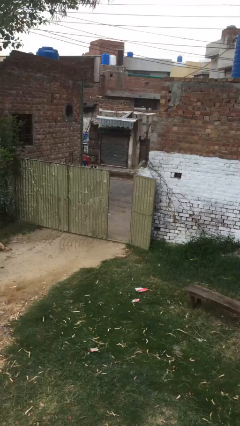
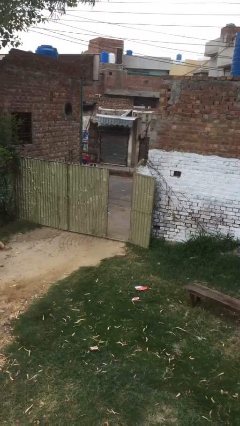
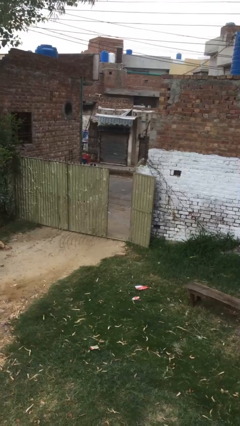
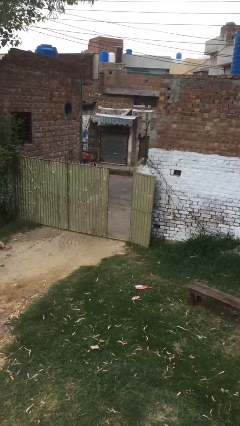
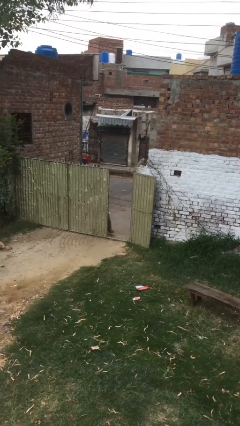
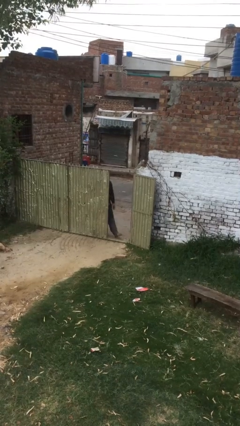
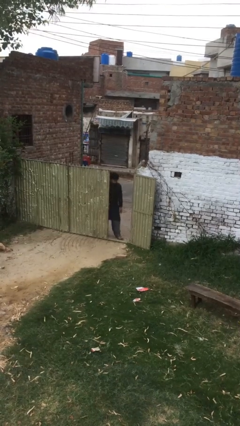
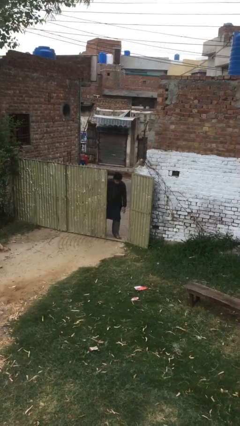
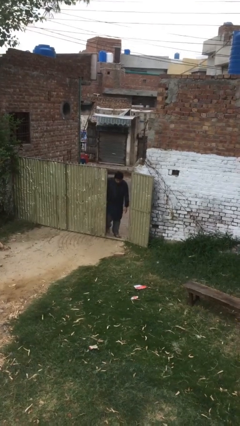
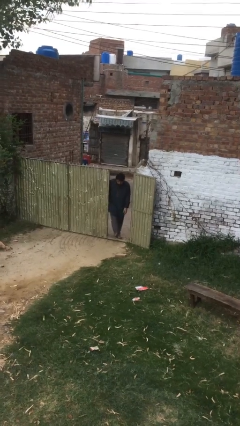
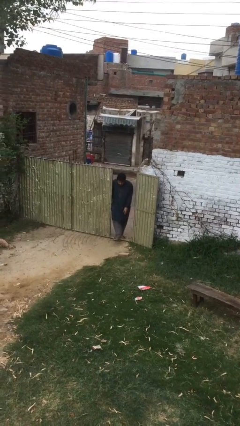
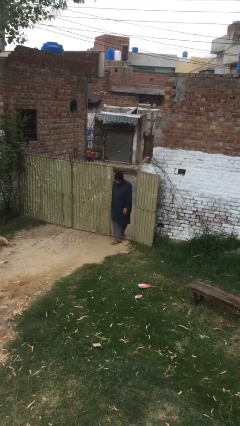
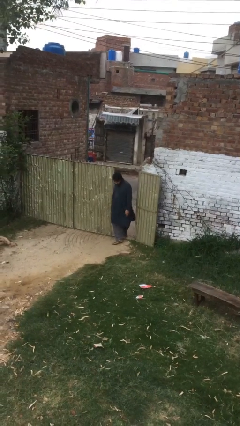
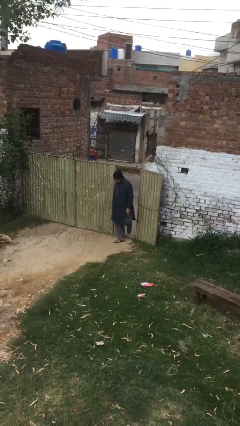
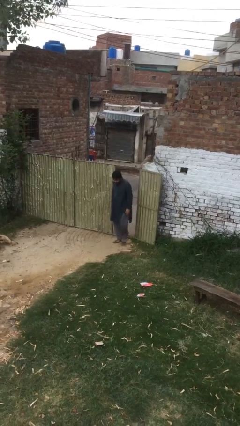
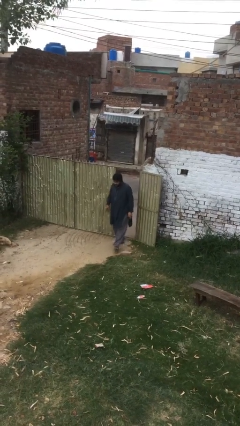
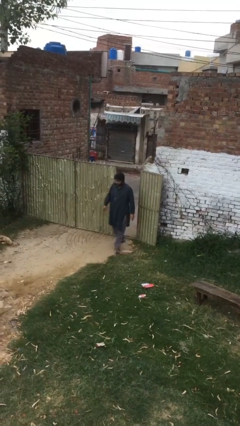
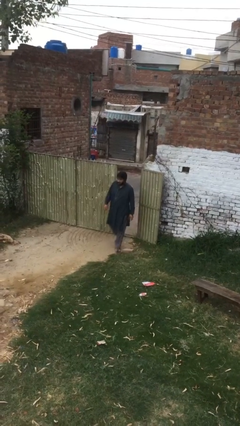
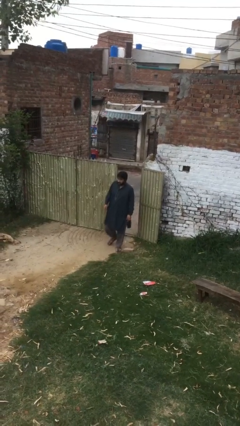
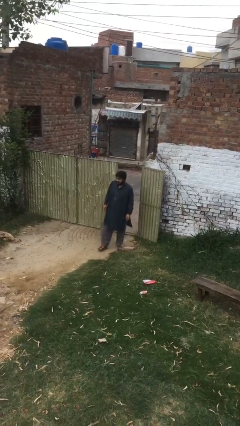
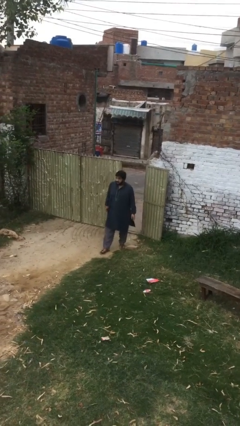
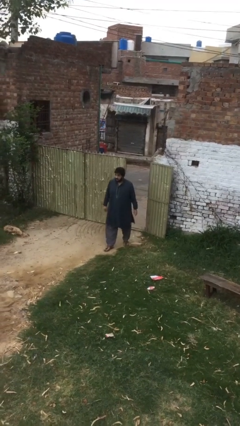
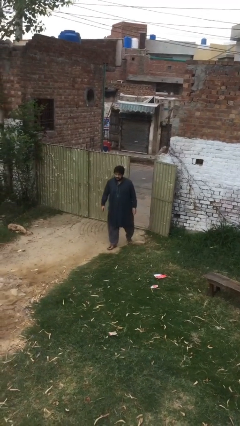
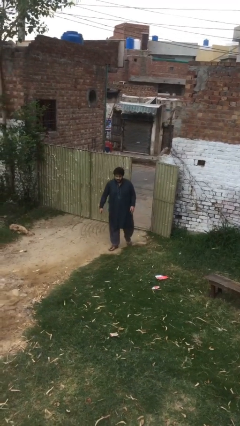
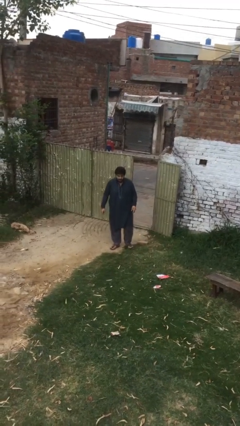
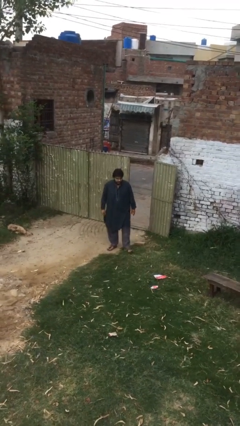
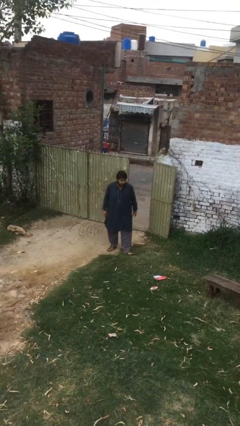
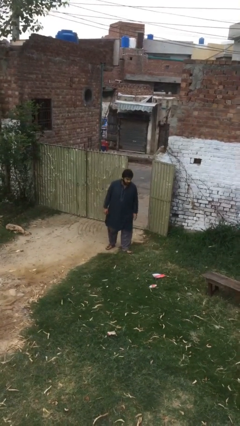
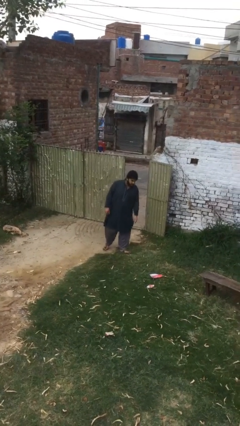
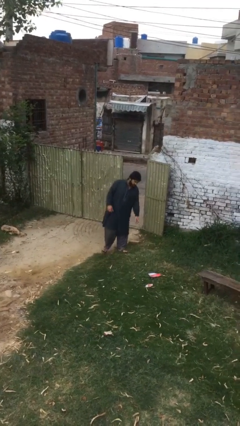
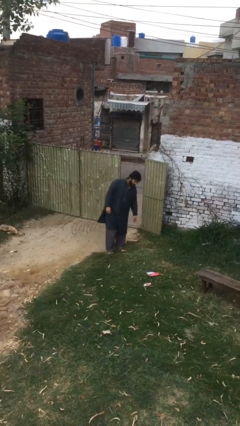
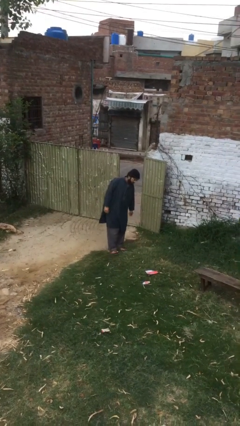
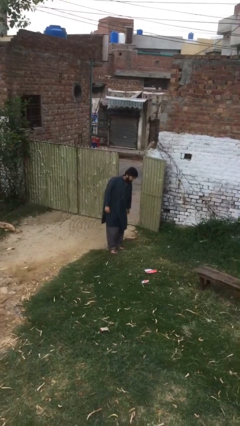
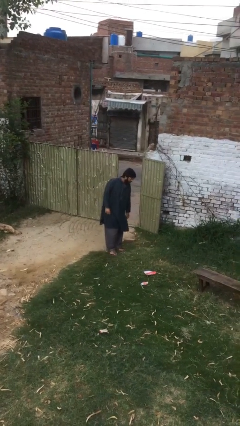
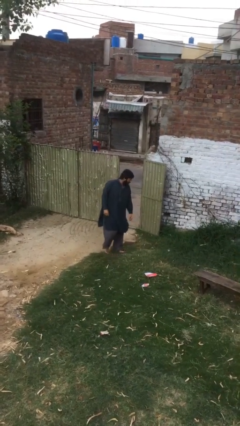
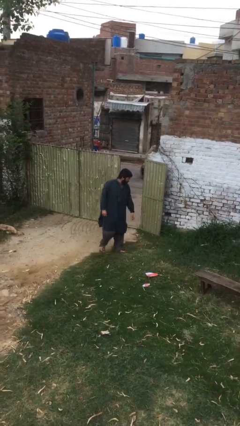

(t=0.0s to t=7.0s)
person enters scene through structure

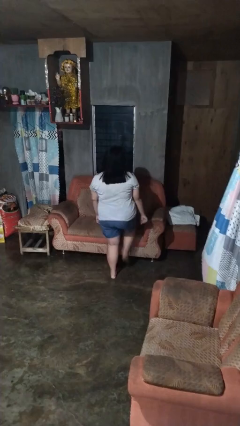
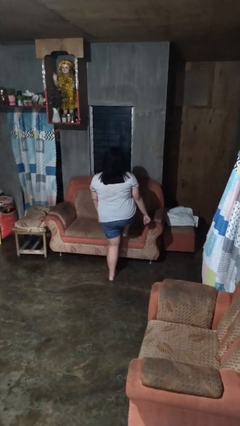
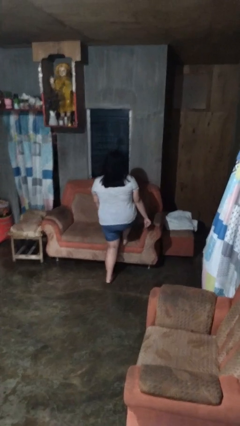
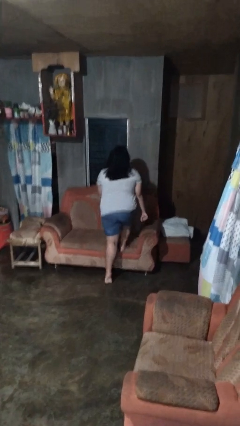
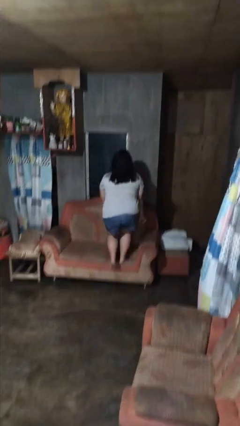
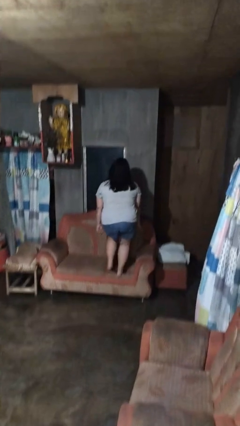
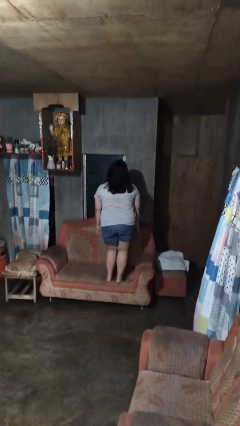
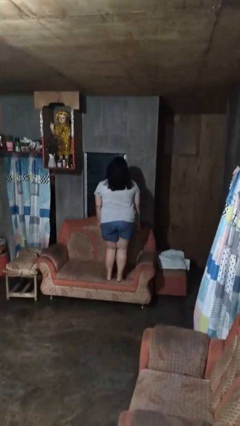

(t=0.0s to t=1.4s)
person climbs on couch

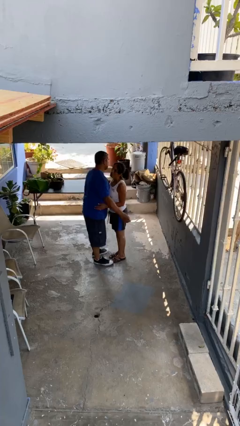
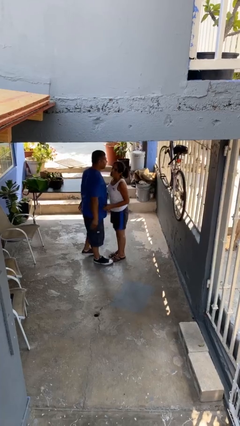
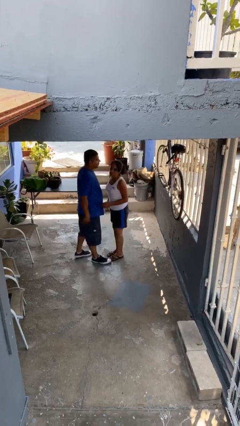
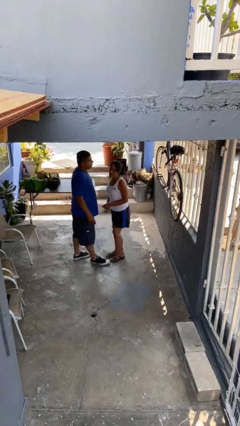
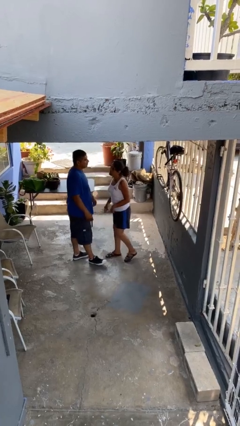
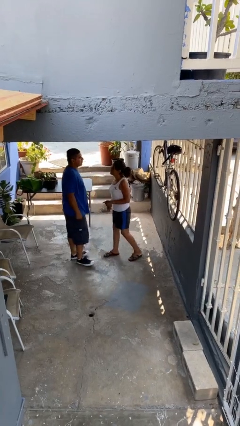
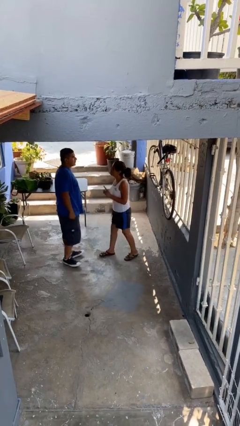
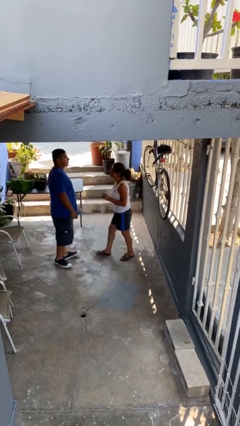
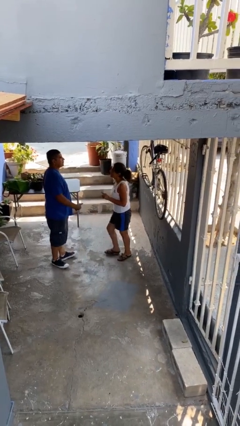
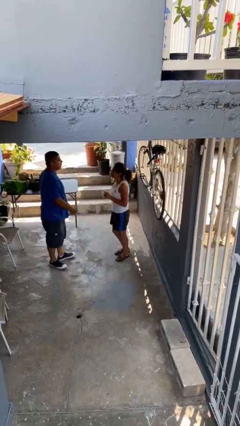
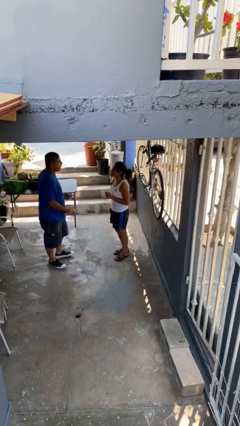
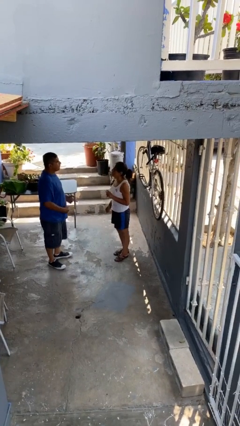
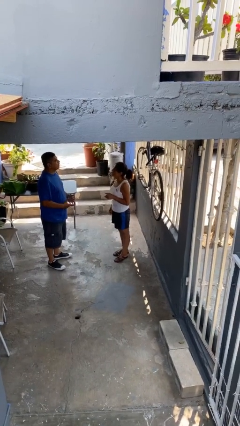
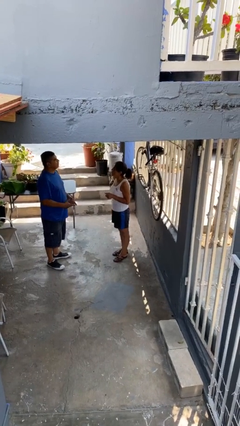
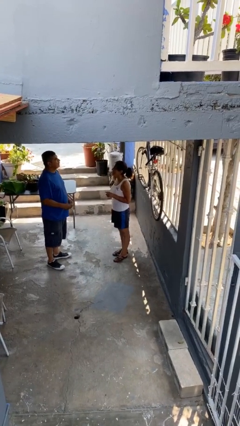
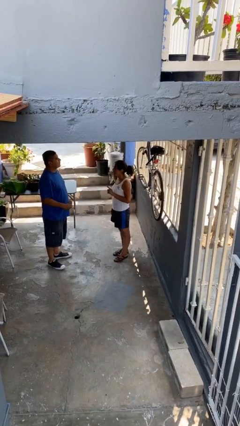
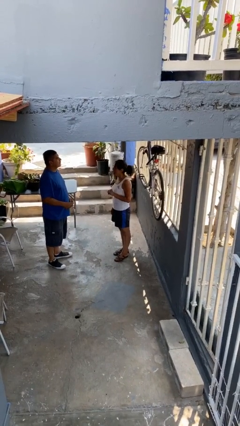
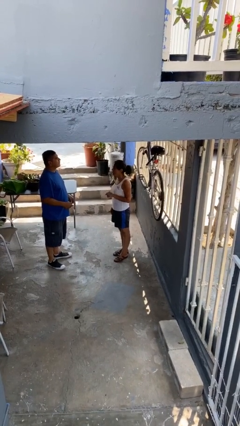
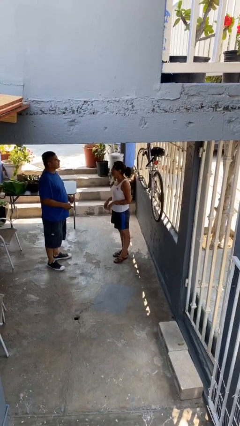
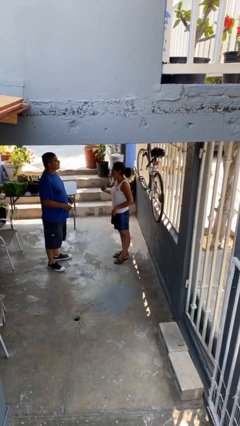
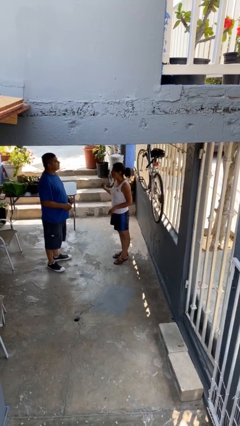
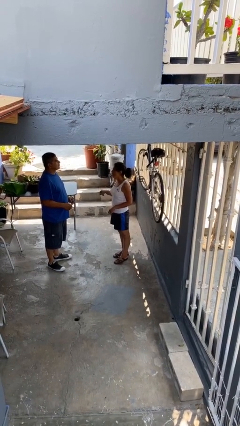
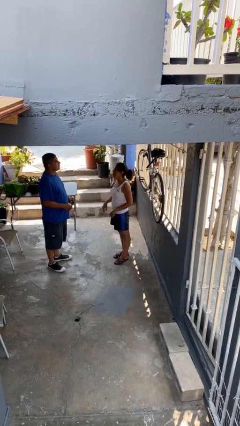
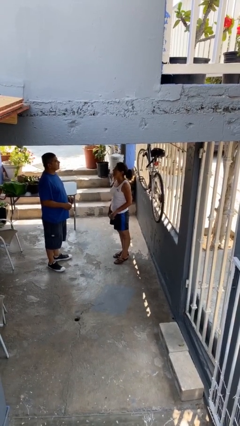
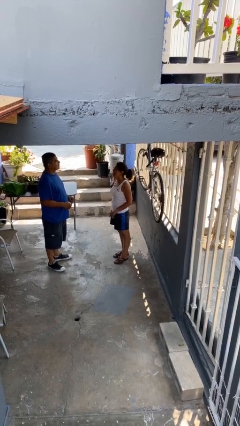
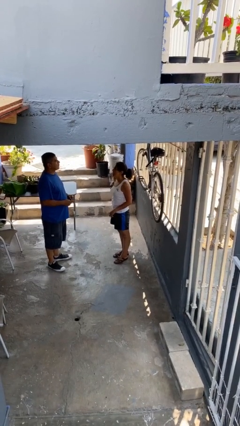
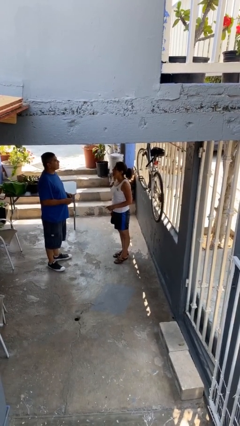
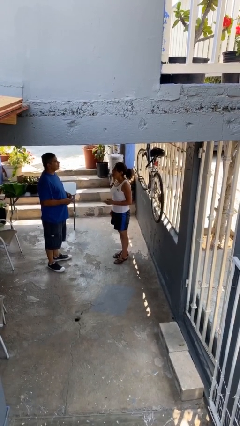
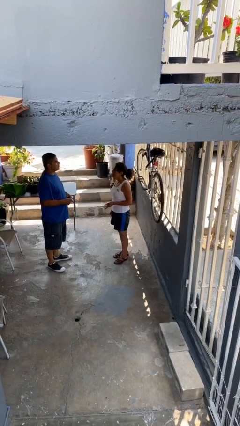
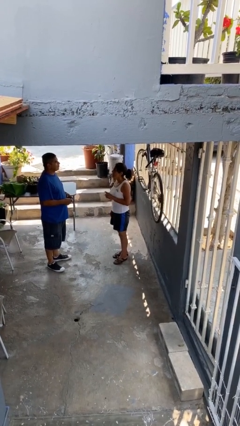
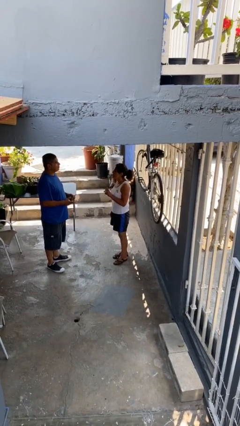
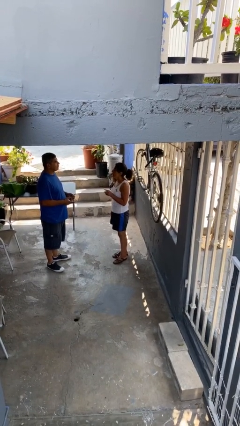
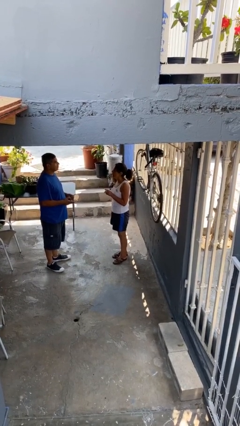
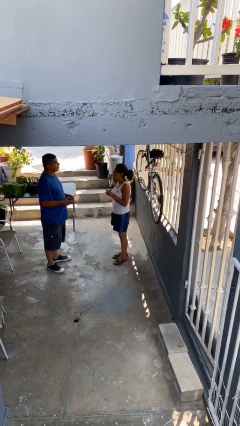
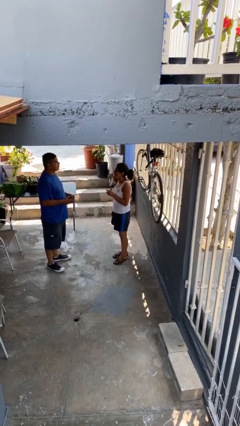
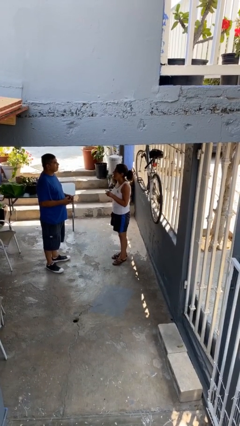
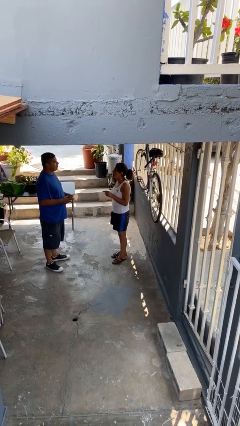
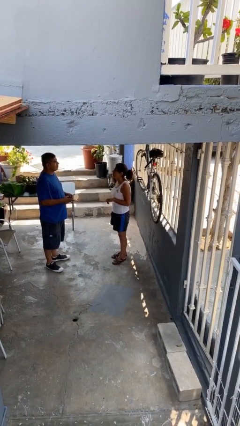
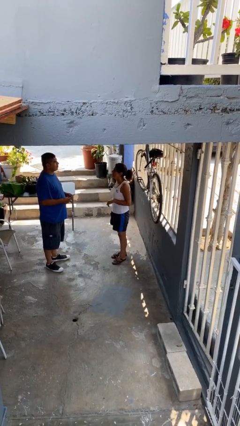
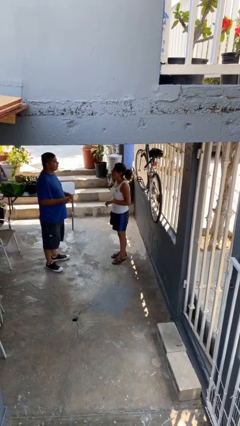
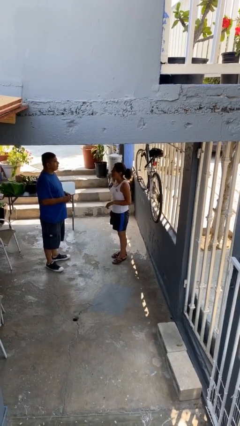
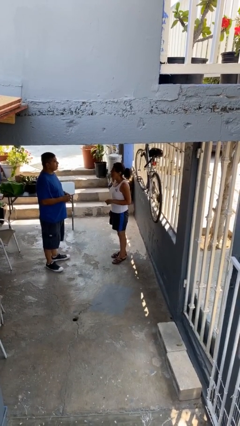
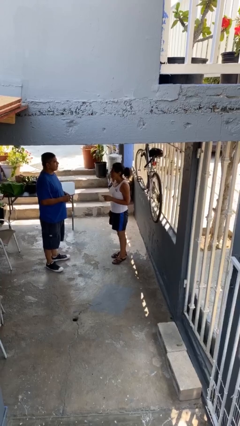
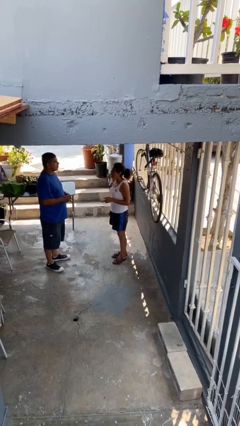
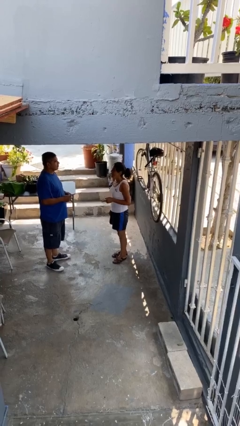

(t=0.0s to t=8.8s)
person talks to person

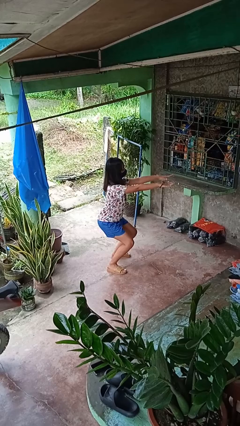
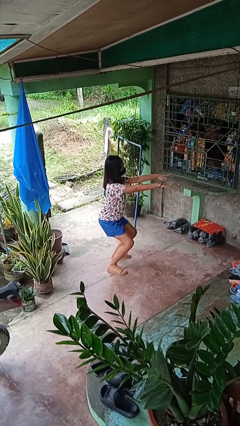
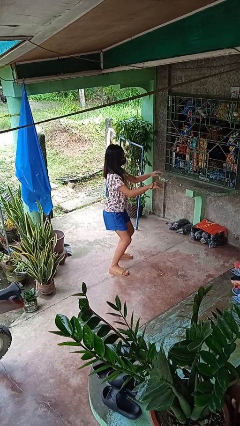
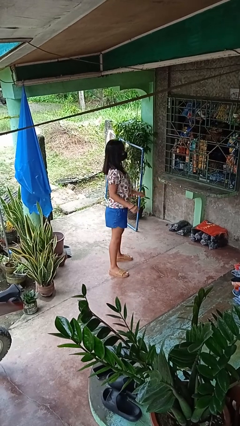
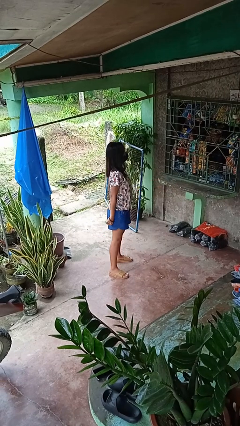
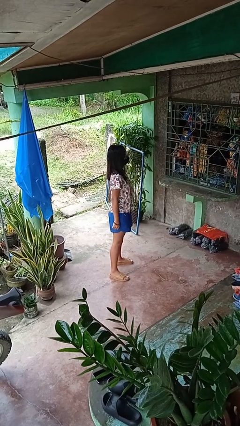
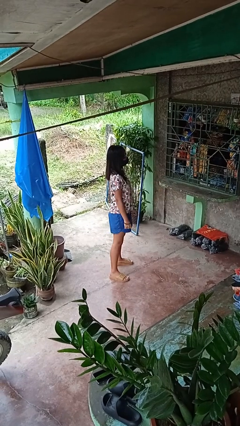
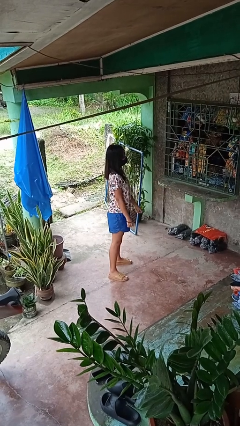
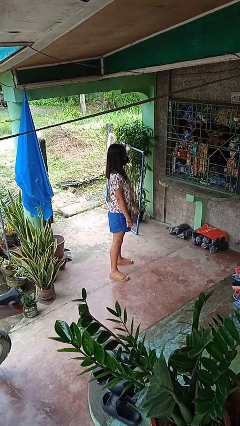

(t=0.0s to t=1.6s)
person stands up
